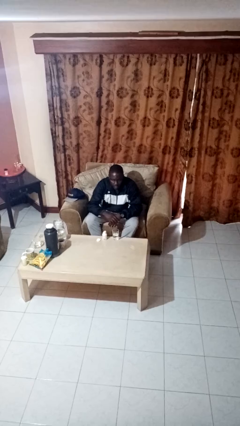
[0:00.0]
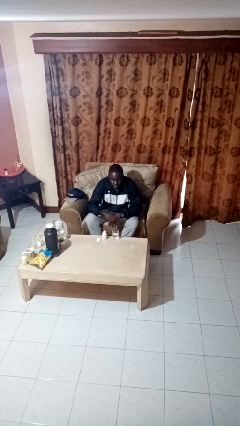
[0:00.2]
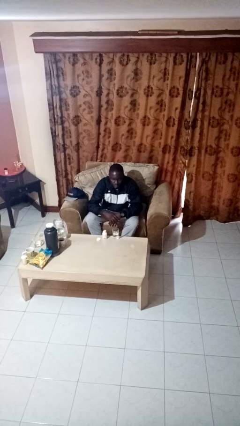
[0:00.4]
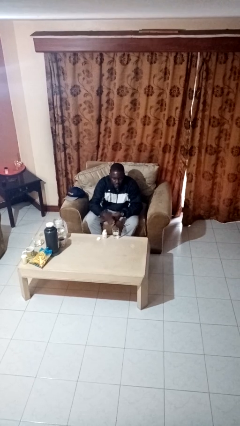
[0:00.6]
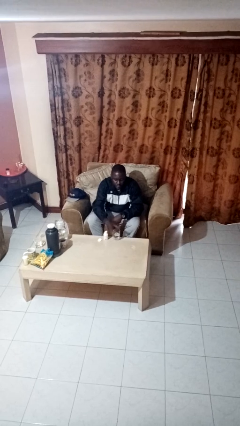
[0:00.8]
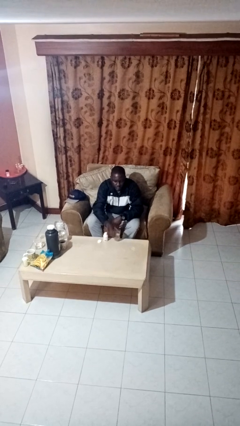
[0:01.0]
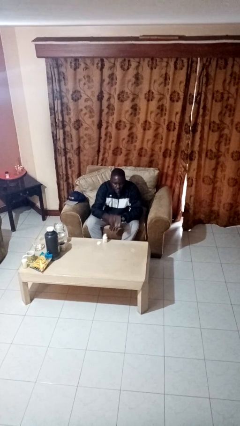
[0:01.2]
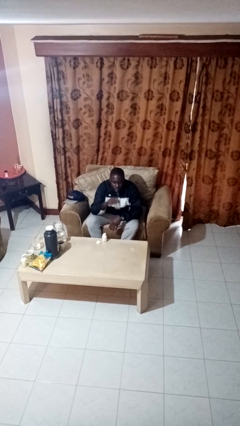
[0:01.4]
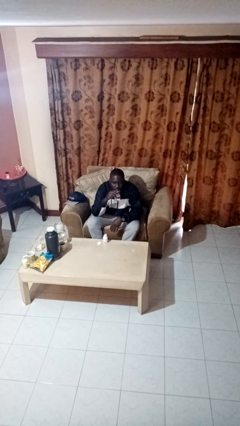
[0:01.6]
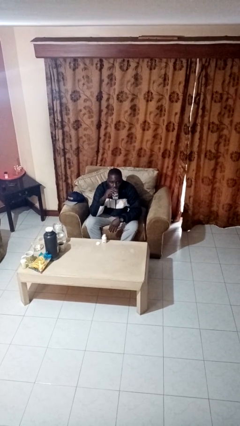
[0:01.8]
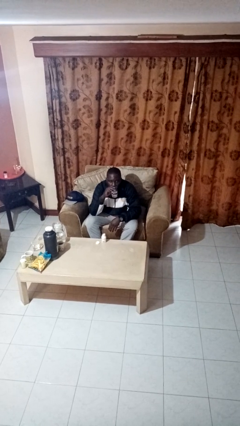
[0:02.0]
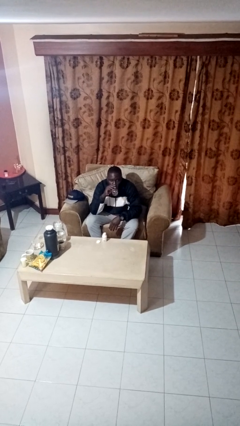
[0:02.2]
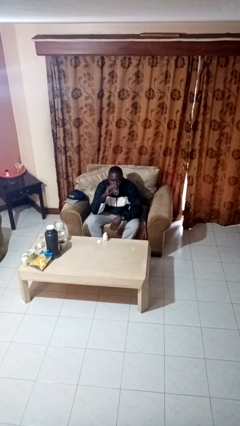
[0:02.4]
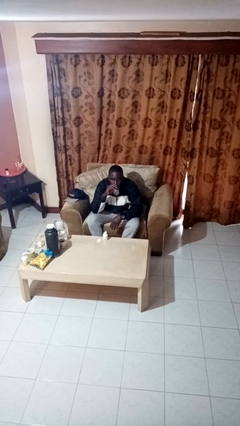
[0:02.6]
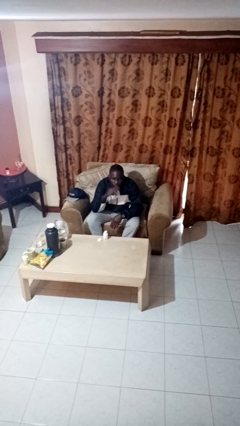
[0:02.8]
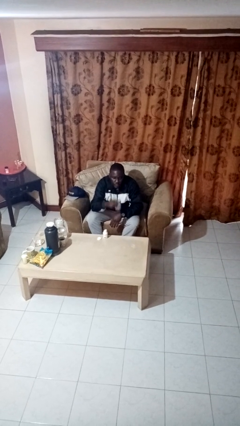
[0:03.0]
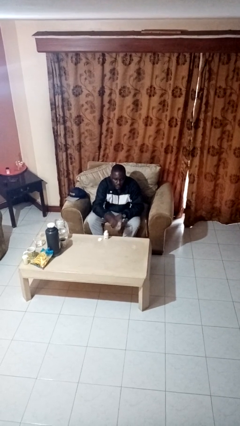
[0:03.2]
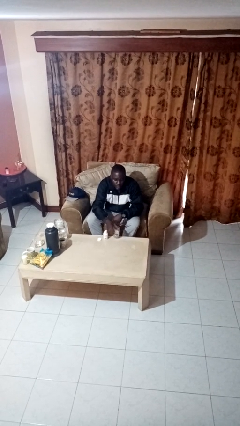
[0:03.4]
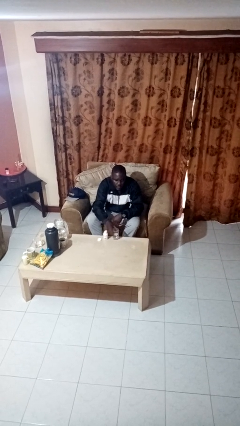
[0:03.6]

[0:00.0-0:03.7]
person drinks from cup

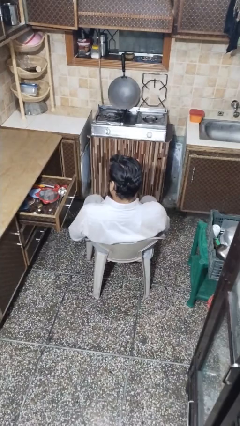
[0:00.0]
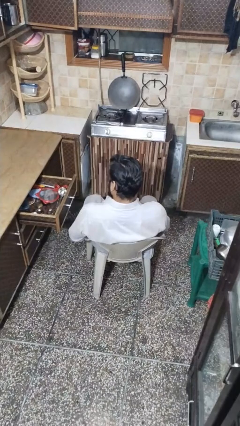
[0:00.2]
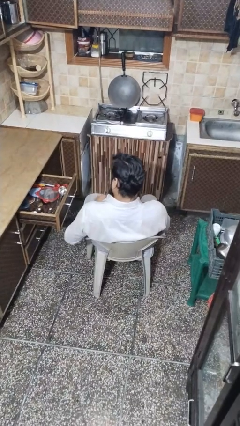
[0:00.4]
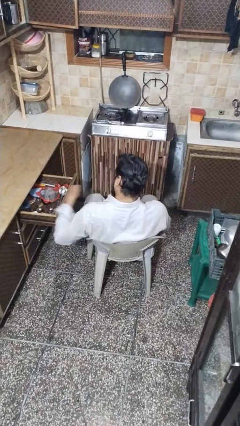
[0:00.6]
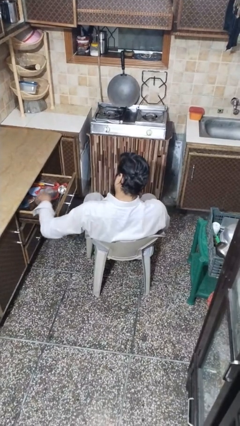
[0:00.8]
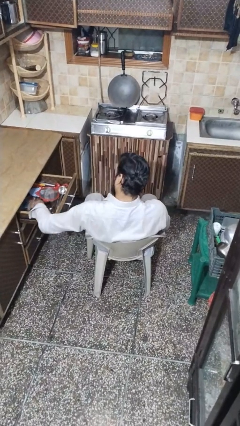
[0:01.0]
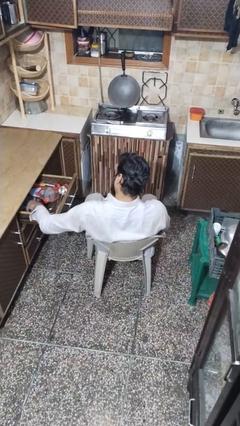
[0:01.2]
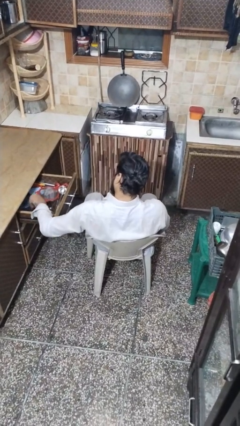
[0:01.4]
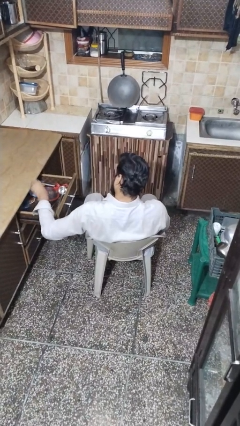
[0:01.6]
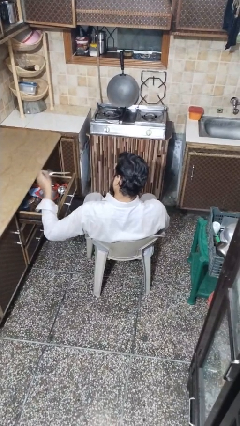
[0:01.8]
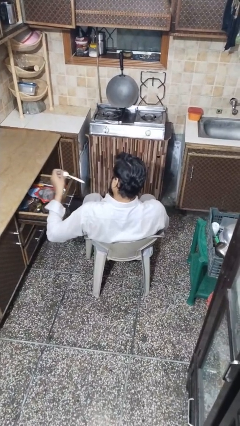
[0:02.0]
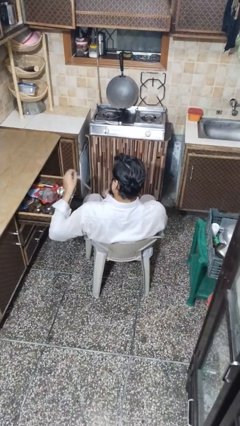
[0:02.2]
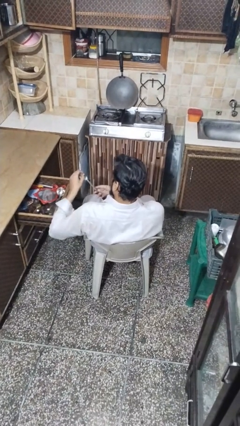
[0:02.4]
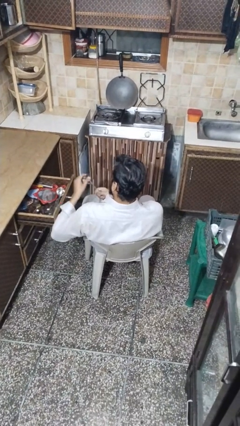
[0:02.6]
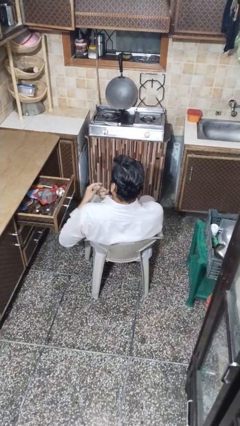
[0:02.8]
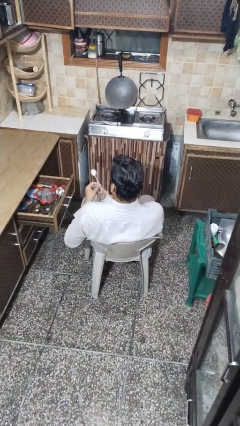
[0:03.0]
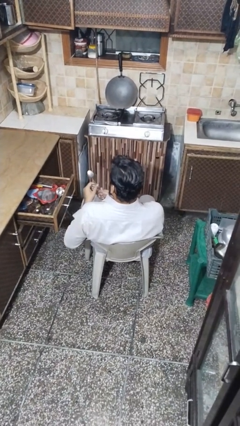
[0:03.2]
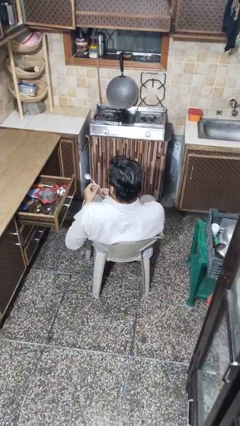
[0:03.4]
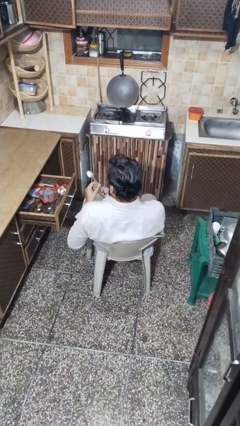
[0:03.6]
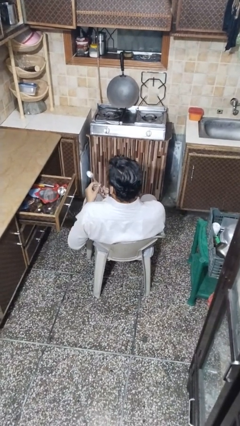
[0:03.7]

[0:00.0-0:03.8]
person takes object from kitchen drawer

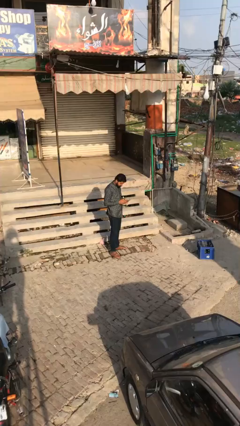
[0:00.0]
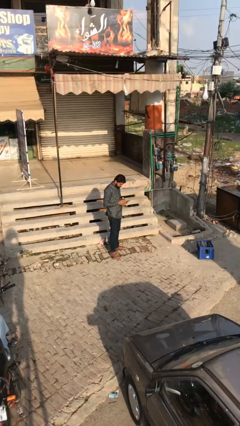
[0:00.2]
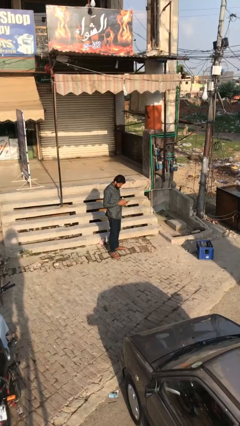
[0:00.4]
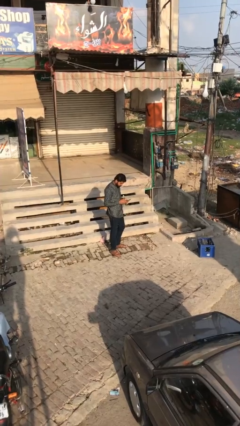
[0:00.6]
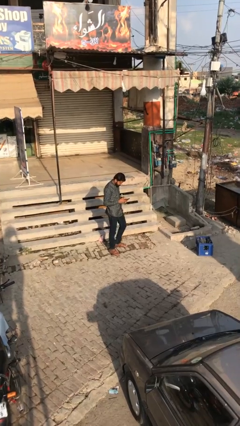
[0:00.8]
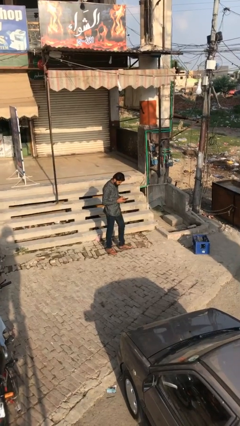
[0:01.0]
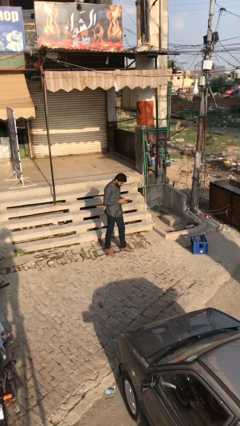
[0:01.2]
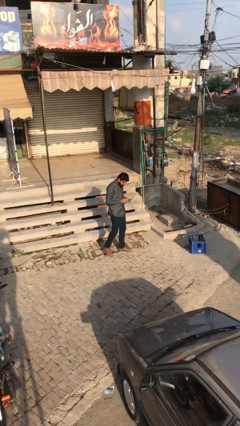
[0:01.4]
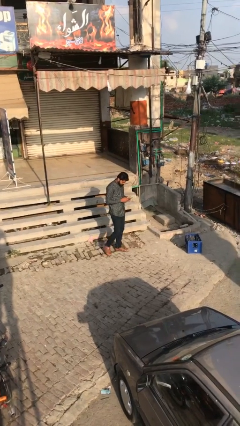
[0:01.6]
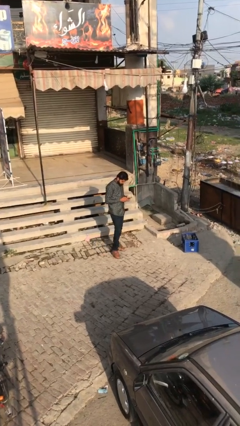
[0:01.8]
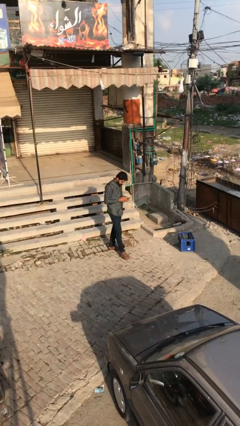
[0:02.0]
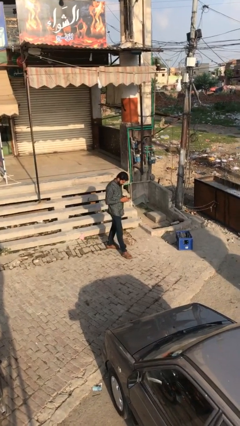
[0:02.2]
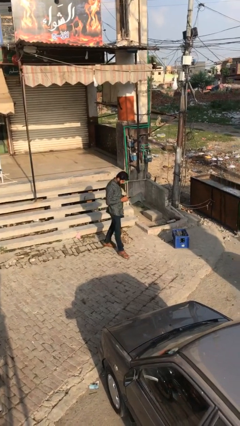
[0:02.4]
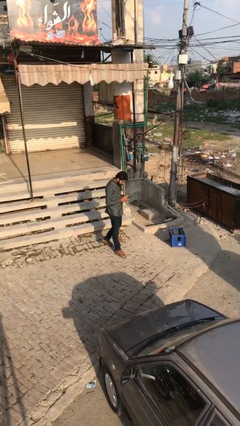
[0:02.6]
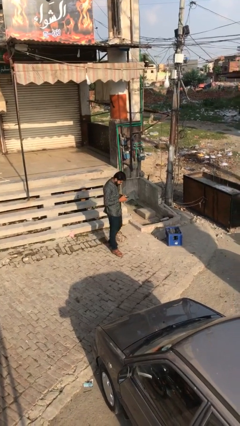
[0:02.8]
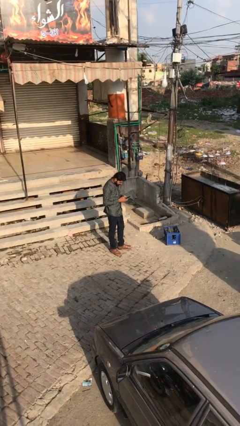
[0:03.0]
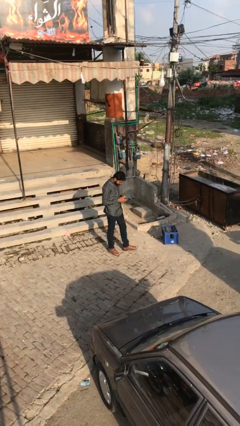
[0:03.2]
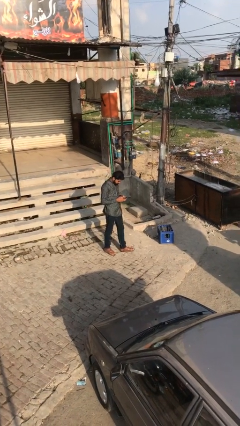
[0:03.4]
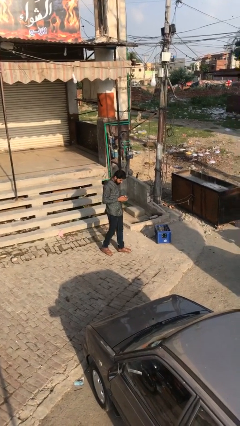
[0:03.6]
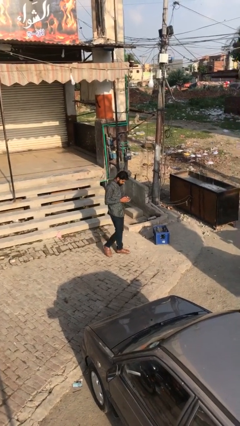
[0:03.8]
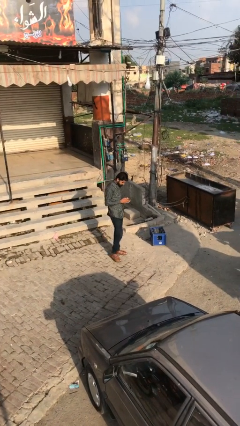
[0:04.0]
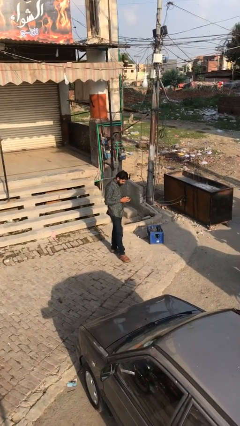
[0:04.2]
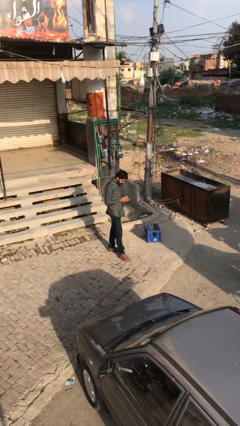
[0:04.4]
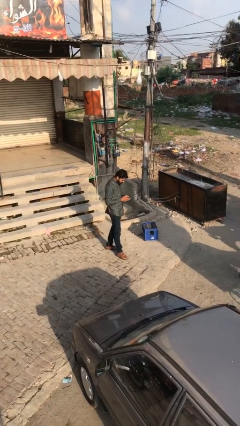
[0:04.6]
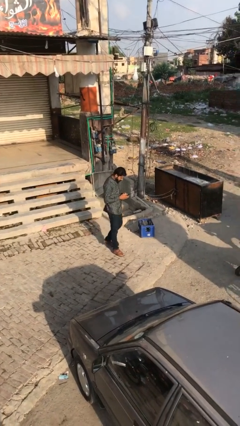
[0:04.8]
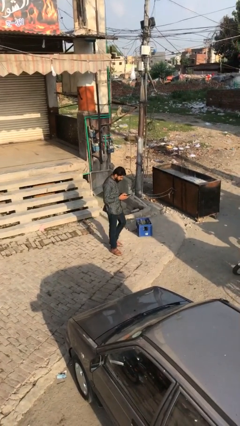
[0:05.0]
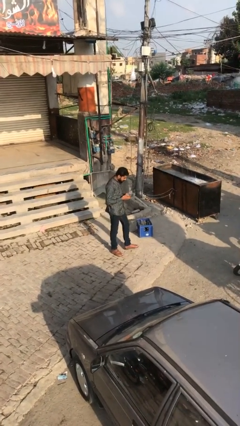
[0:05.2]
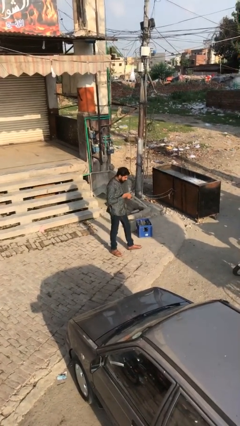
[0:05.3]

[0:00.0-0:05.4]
person texts on phone

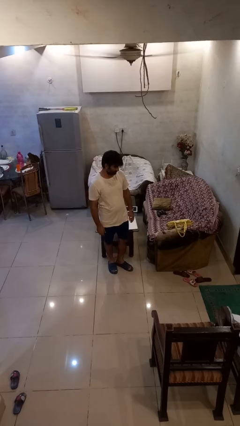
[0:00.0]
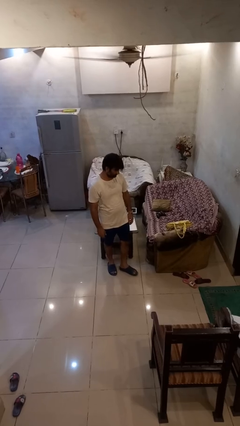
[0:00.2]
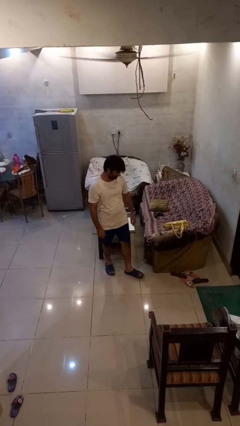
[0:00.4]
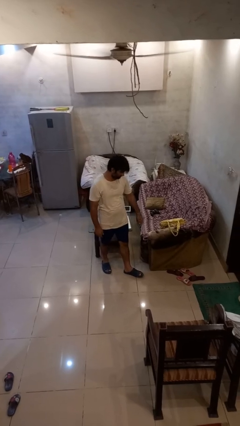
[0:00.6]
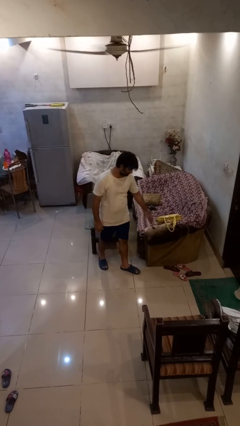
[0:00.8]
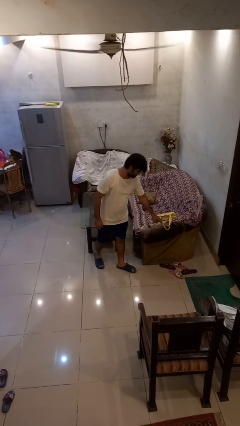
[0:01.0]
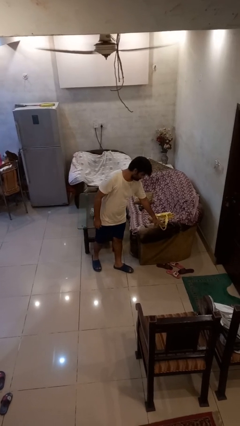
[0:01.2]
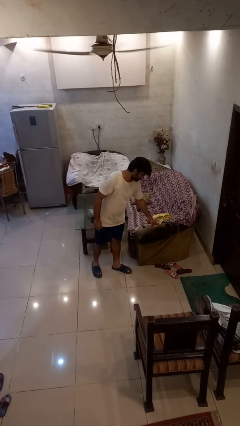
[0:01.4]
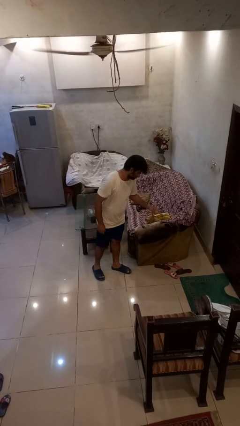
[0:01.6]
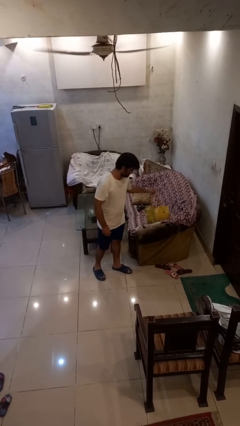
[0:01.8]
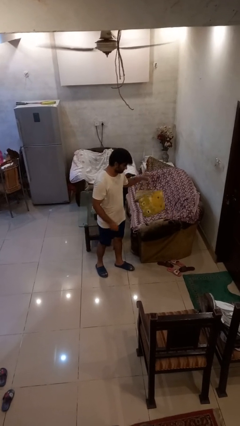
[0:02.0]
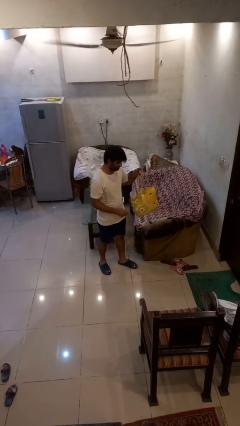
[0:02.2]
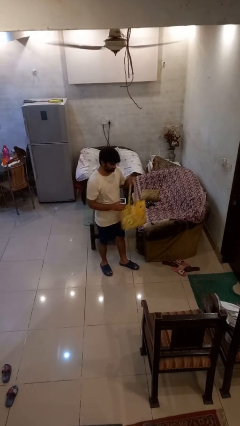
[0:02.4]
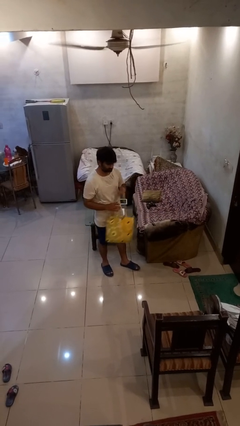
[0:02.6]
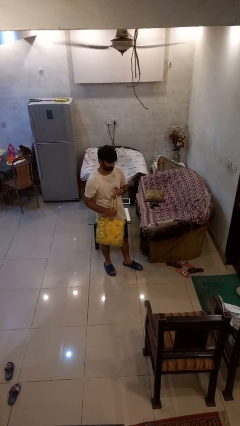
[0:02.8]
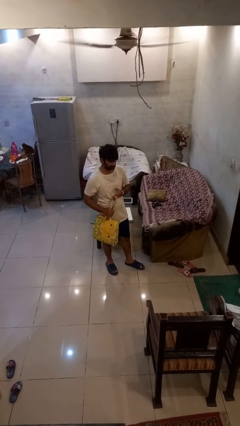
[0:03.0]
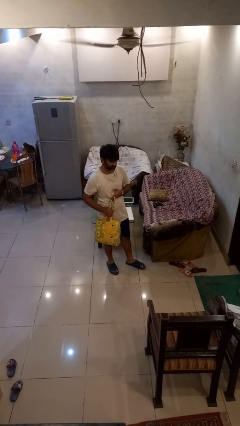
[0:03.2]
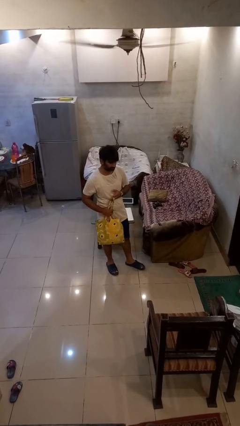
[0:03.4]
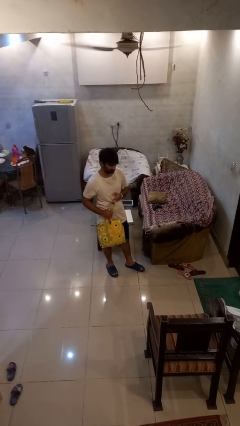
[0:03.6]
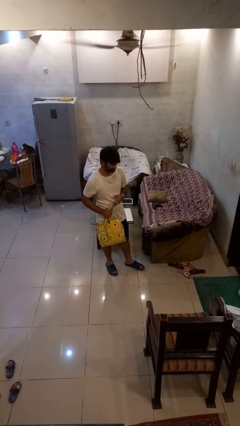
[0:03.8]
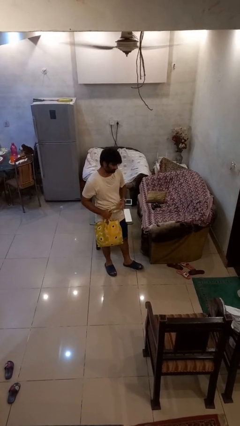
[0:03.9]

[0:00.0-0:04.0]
person picks up object from couch

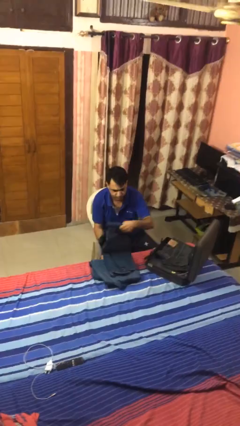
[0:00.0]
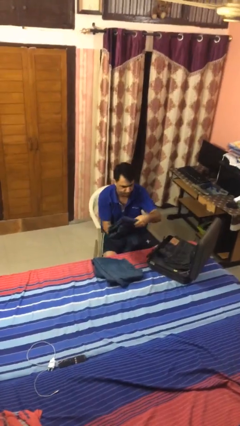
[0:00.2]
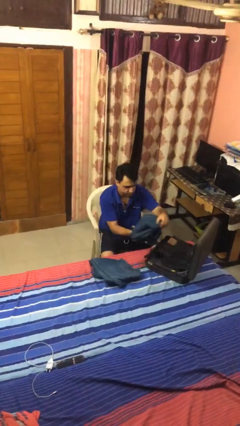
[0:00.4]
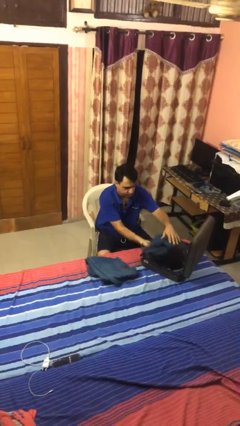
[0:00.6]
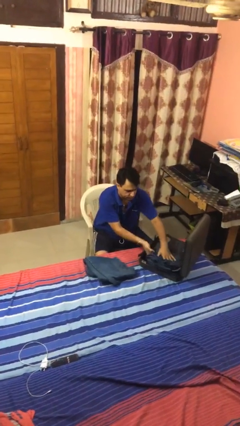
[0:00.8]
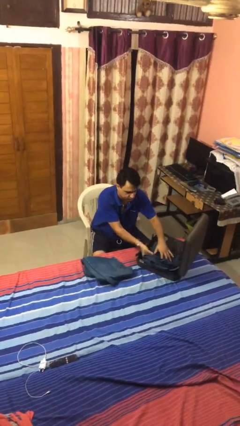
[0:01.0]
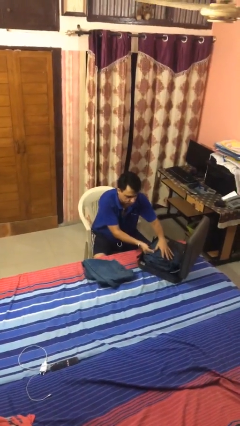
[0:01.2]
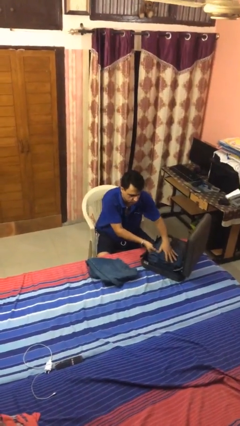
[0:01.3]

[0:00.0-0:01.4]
person loads clothes into suitcase
